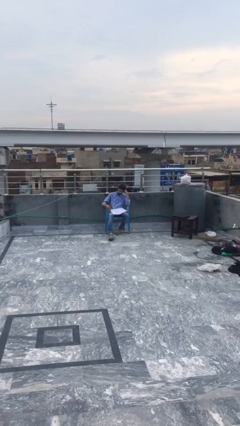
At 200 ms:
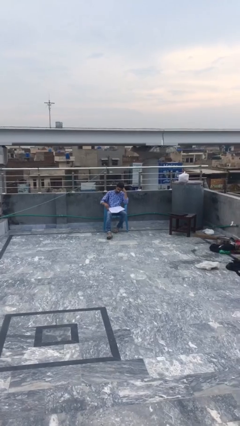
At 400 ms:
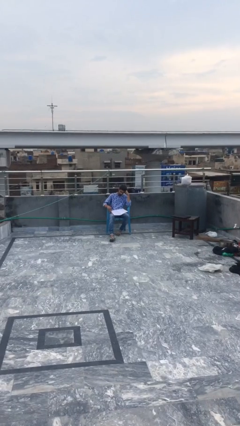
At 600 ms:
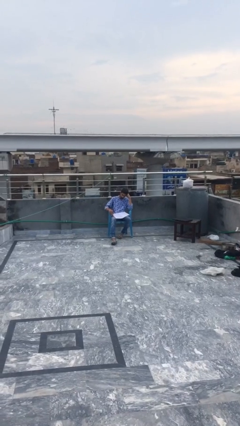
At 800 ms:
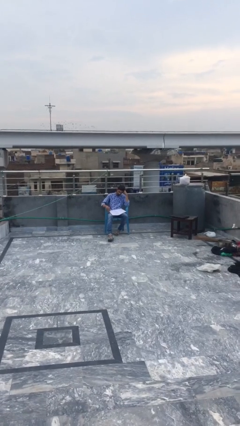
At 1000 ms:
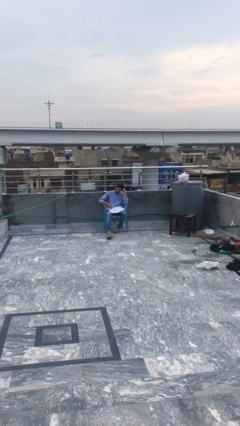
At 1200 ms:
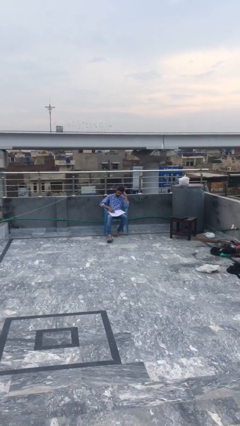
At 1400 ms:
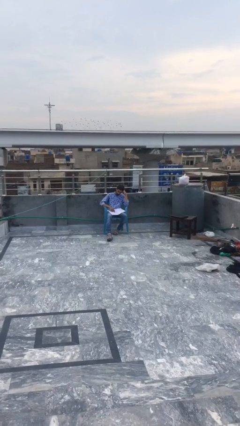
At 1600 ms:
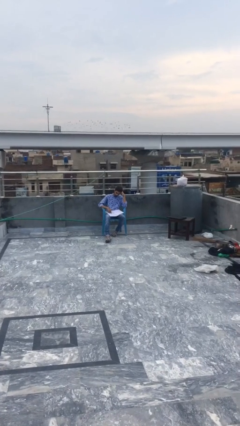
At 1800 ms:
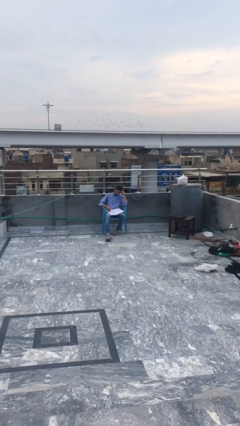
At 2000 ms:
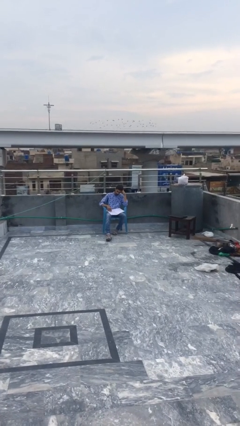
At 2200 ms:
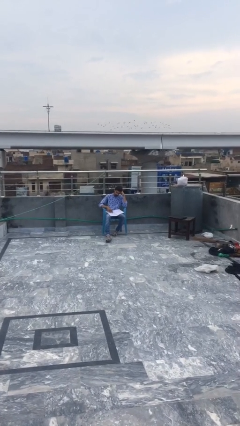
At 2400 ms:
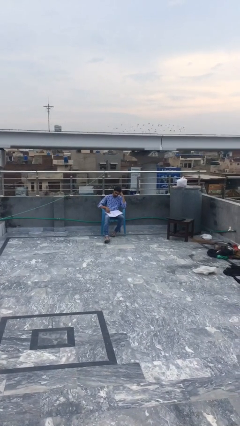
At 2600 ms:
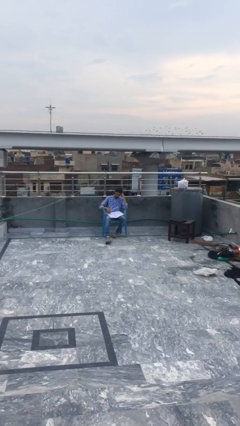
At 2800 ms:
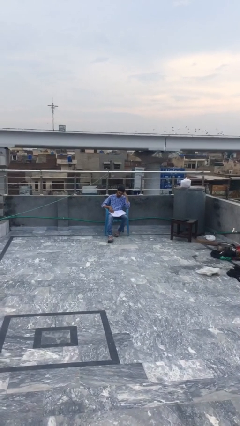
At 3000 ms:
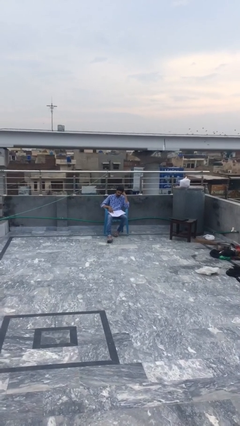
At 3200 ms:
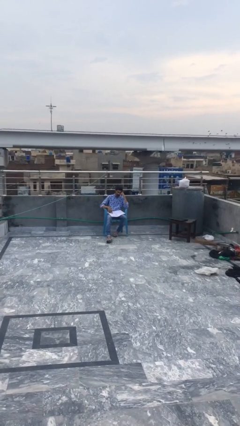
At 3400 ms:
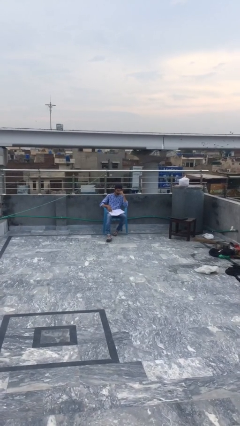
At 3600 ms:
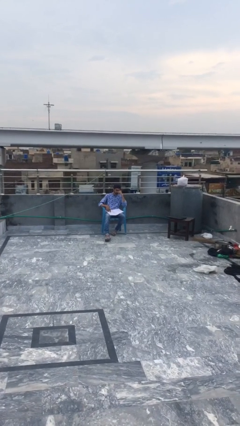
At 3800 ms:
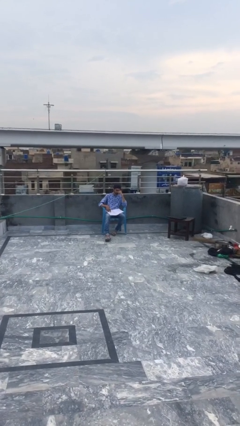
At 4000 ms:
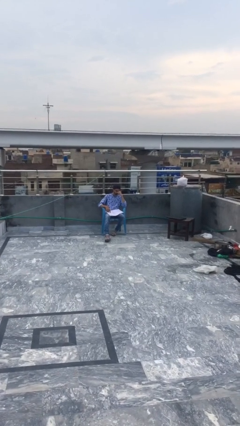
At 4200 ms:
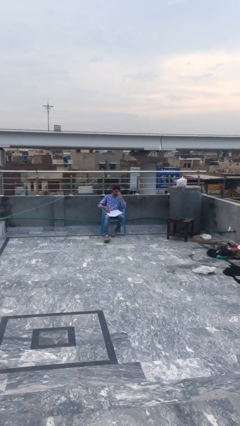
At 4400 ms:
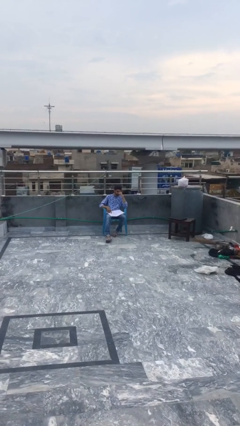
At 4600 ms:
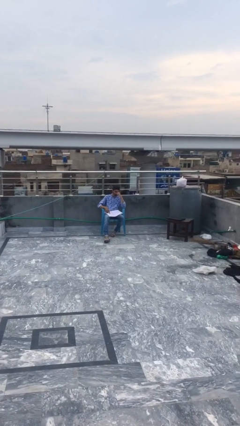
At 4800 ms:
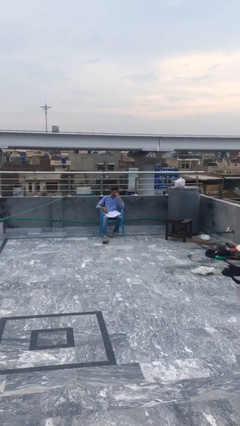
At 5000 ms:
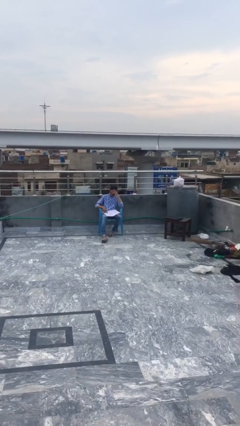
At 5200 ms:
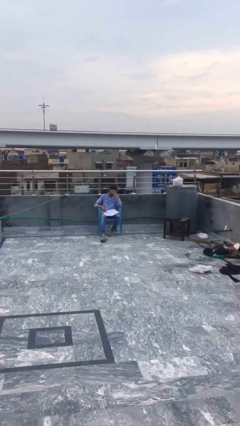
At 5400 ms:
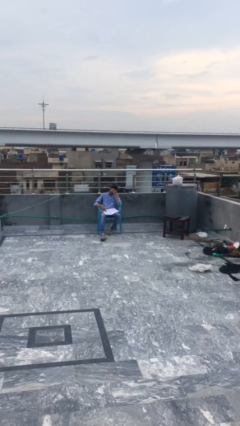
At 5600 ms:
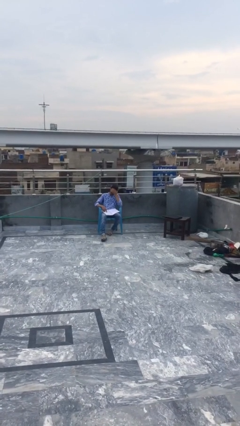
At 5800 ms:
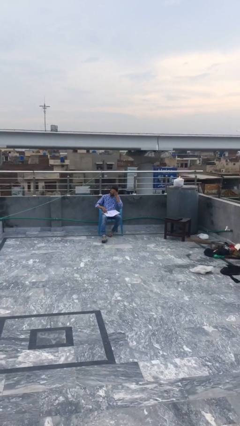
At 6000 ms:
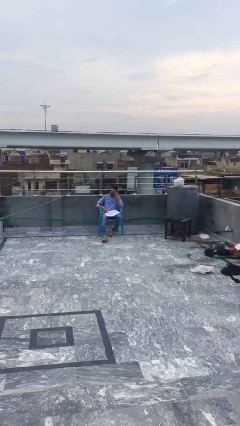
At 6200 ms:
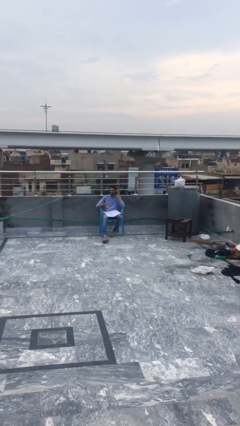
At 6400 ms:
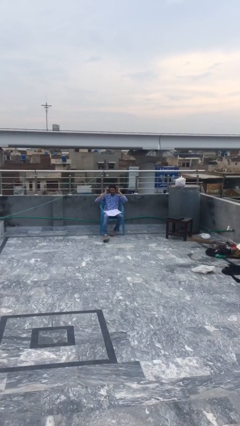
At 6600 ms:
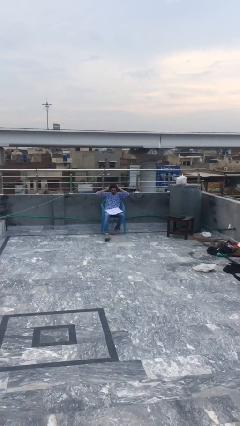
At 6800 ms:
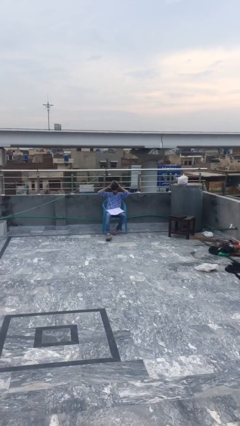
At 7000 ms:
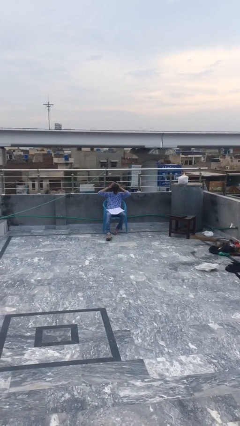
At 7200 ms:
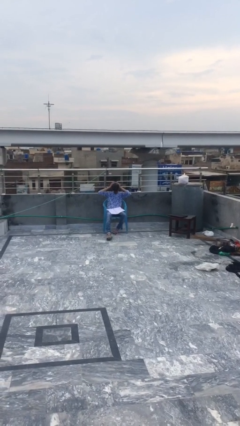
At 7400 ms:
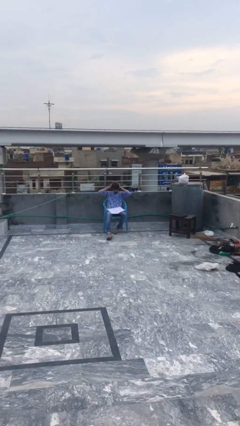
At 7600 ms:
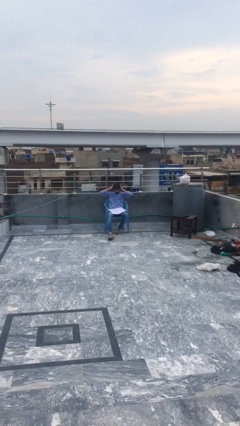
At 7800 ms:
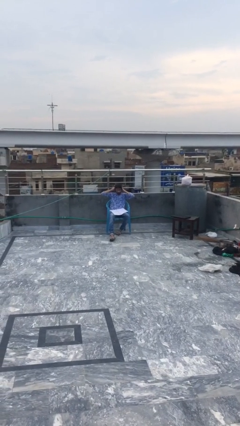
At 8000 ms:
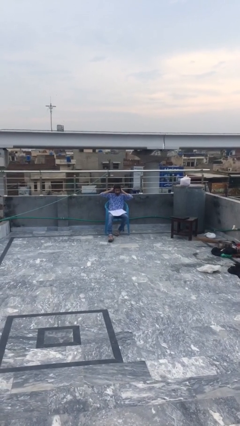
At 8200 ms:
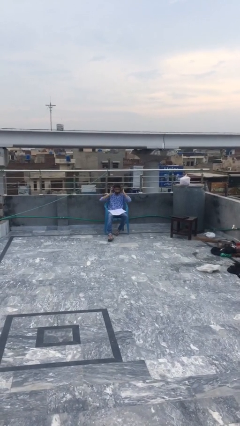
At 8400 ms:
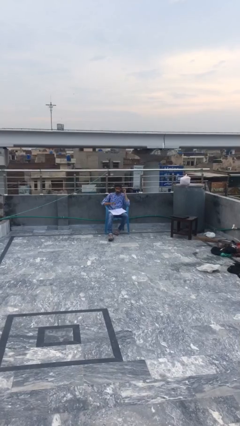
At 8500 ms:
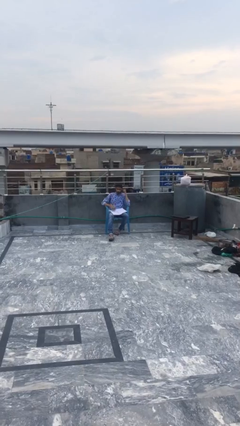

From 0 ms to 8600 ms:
person reads document

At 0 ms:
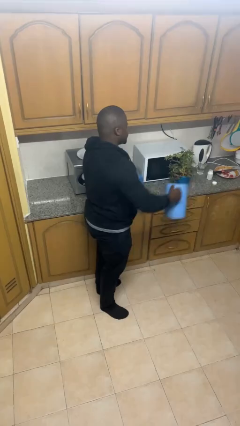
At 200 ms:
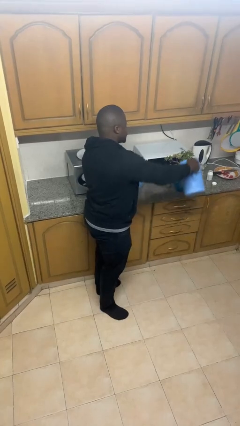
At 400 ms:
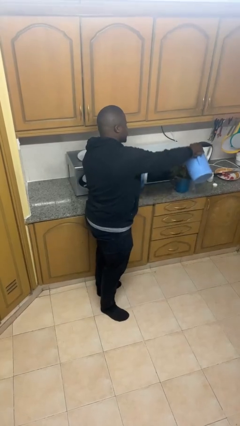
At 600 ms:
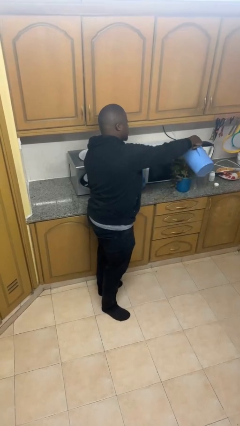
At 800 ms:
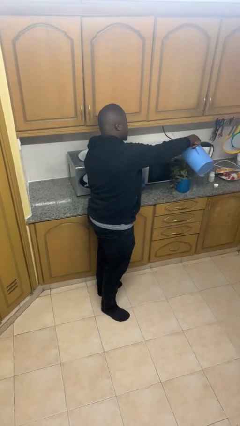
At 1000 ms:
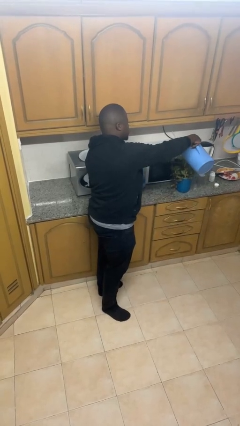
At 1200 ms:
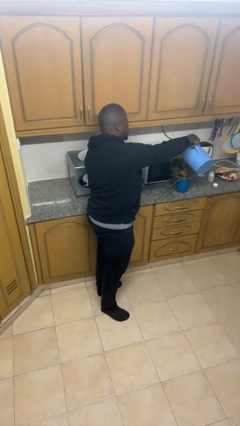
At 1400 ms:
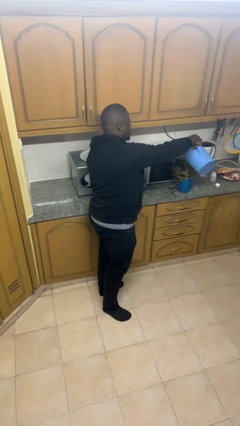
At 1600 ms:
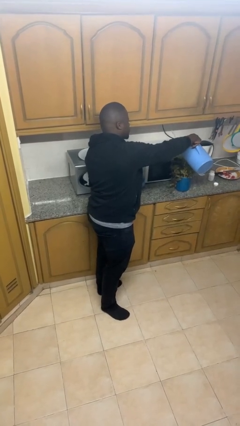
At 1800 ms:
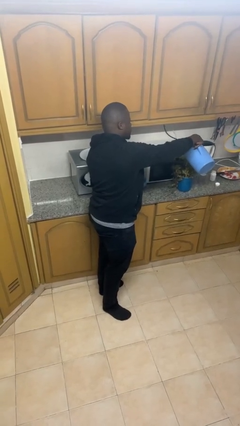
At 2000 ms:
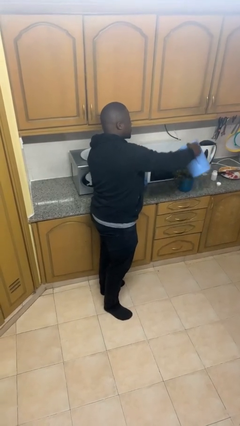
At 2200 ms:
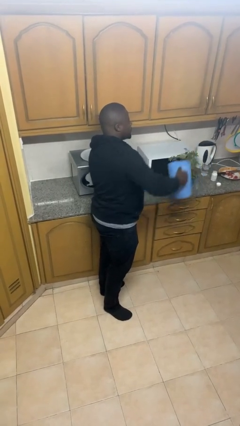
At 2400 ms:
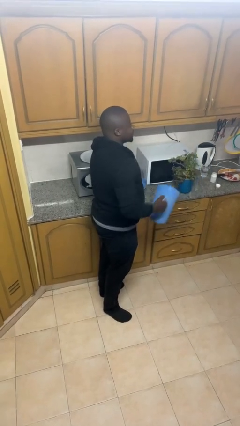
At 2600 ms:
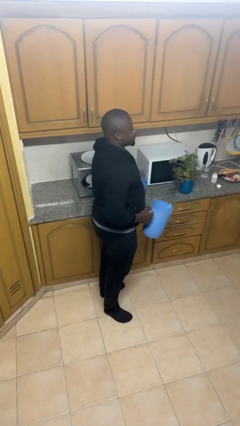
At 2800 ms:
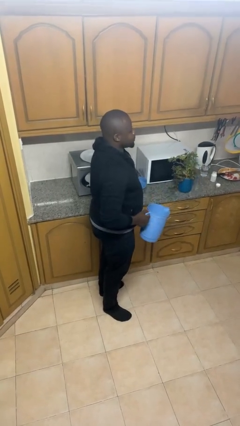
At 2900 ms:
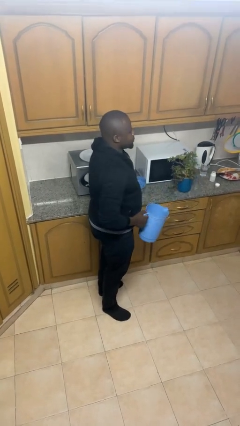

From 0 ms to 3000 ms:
person waters houseplant

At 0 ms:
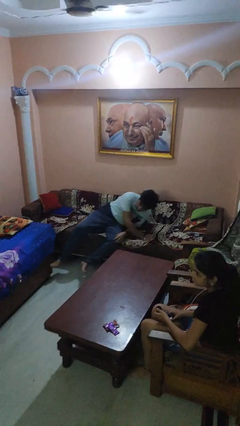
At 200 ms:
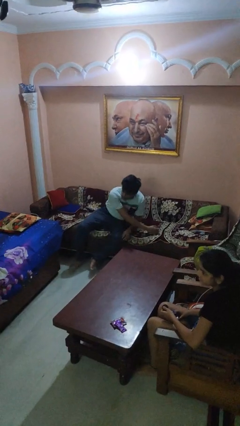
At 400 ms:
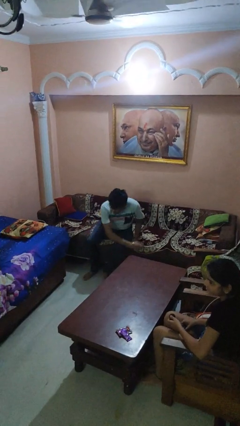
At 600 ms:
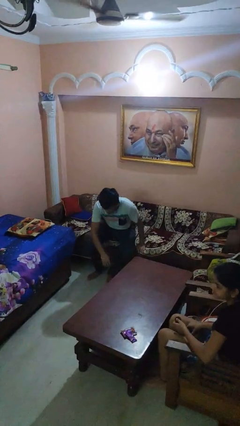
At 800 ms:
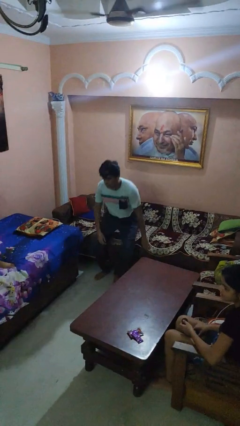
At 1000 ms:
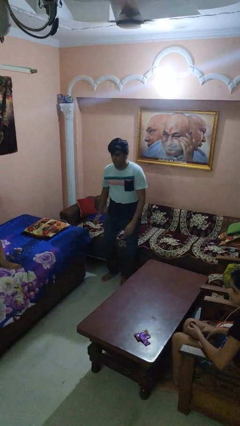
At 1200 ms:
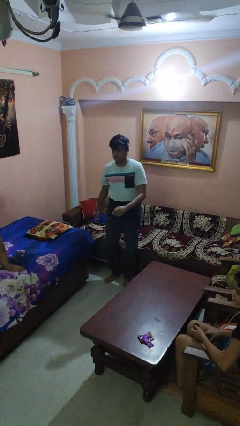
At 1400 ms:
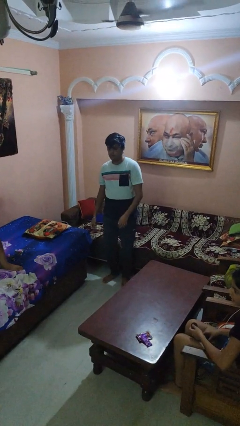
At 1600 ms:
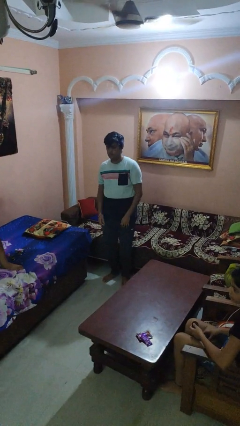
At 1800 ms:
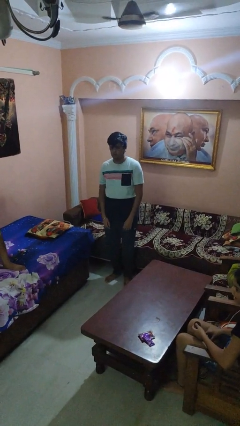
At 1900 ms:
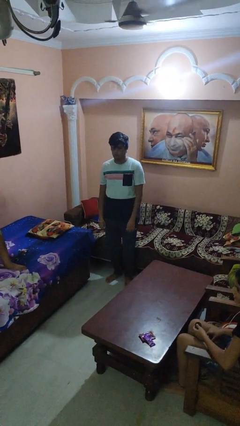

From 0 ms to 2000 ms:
person stands up

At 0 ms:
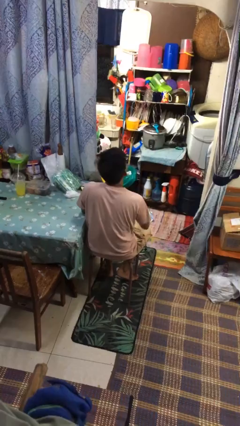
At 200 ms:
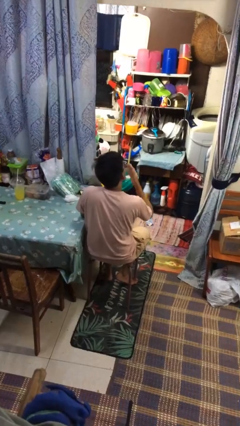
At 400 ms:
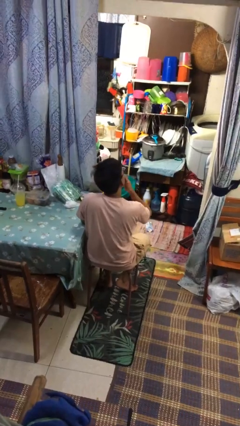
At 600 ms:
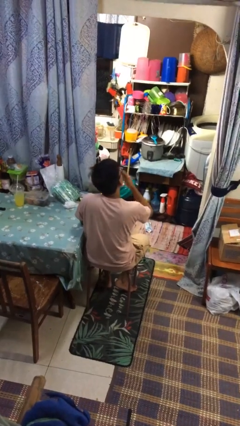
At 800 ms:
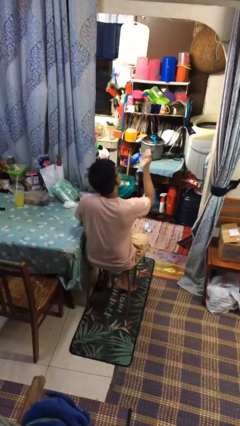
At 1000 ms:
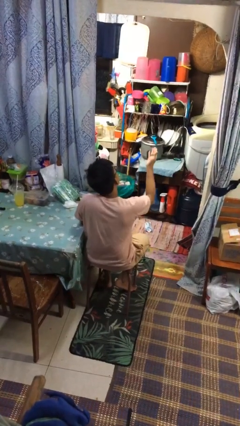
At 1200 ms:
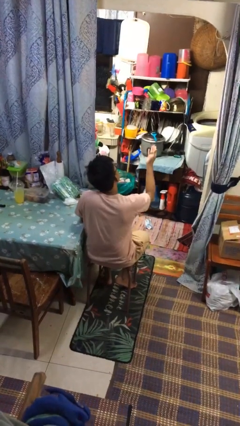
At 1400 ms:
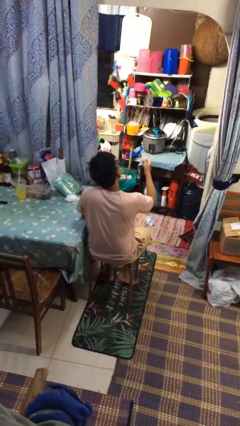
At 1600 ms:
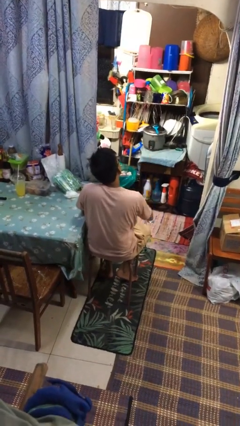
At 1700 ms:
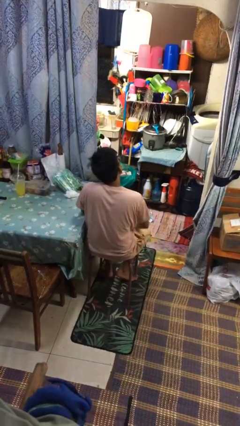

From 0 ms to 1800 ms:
person gestures blow kiss

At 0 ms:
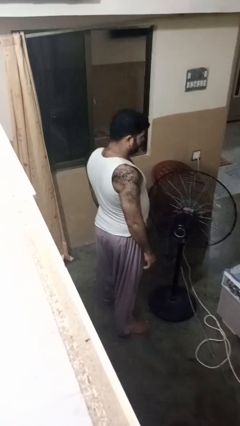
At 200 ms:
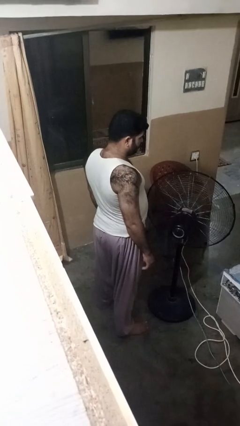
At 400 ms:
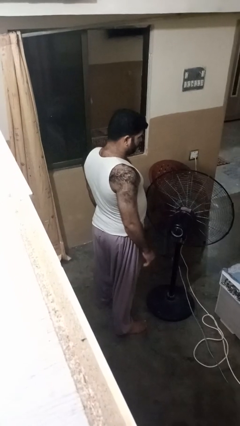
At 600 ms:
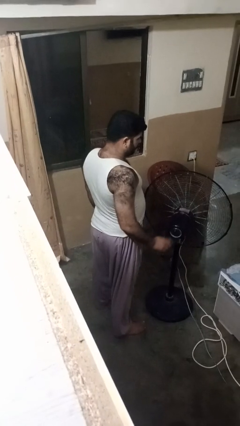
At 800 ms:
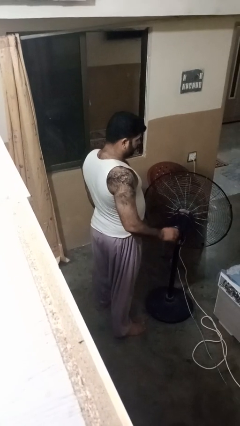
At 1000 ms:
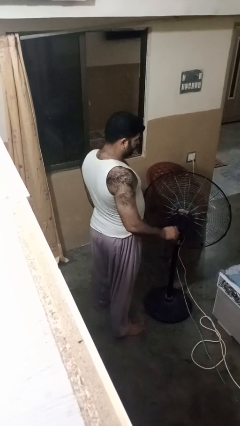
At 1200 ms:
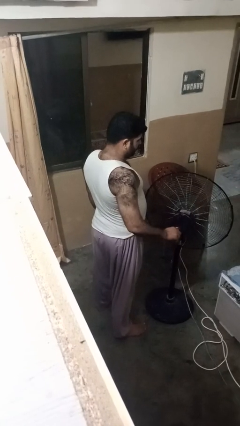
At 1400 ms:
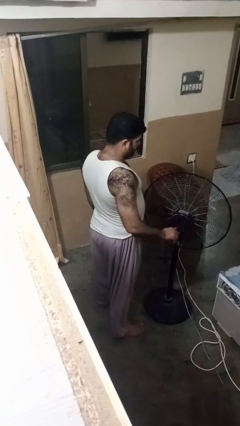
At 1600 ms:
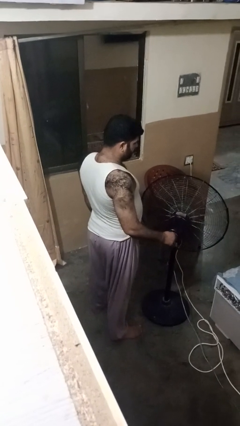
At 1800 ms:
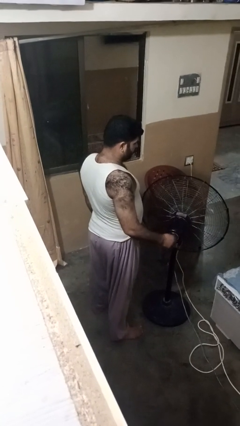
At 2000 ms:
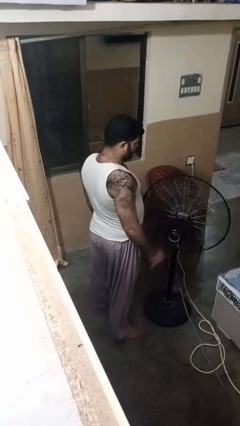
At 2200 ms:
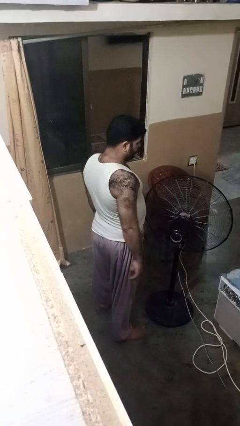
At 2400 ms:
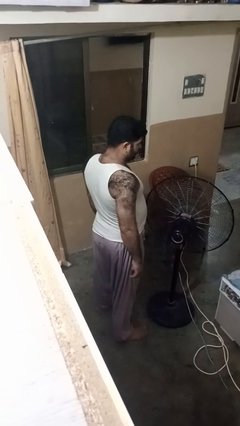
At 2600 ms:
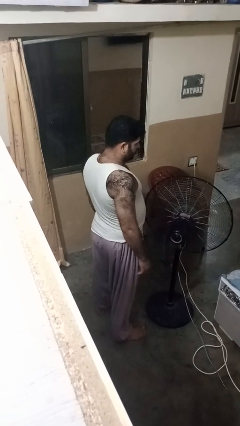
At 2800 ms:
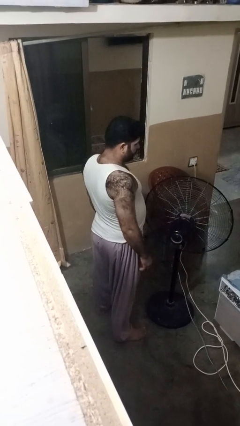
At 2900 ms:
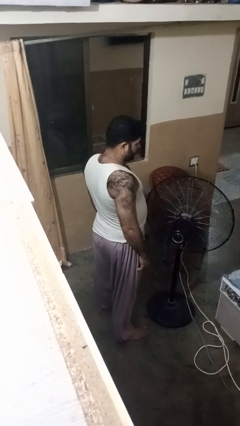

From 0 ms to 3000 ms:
person turns on fan
